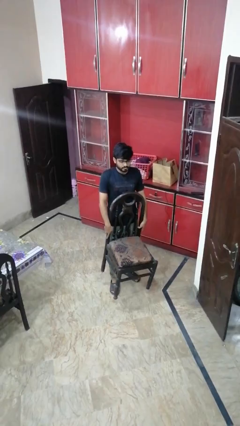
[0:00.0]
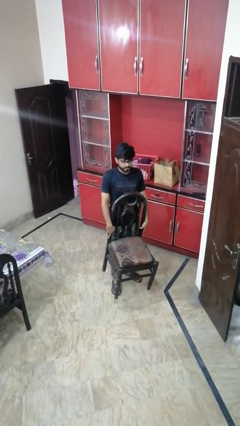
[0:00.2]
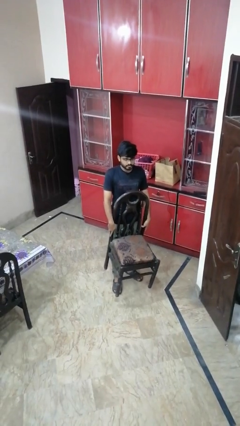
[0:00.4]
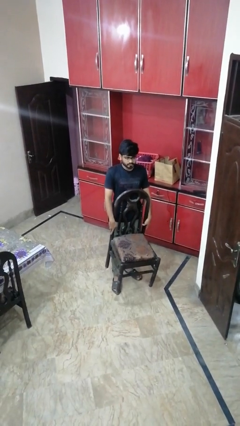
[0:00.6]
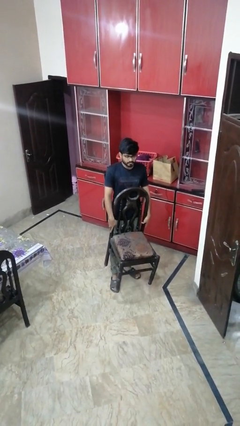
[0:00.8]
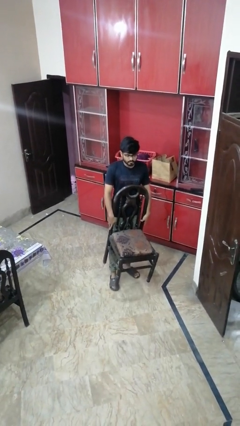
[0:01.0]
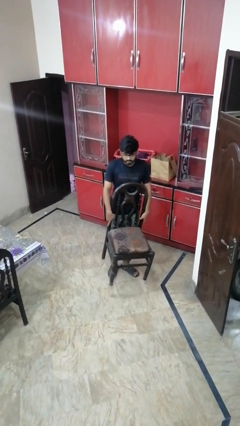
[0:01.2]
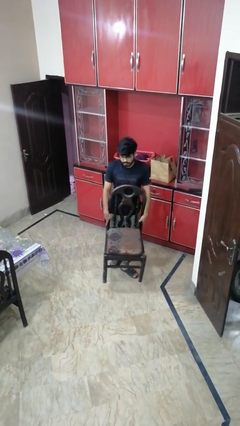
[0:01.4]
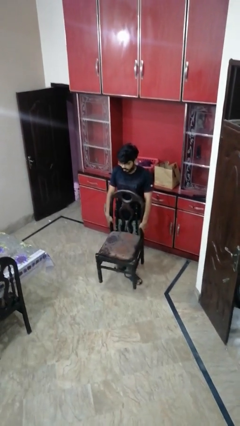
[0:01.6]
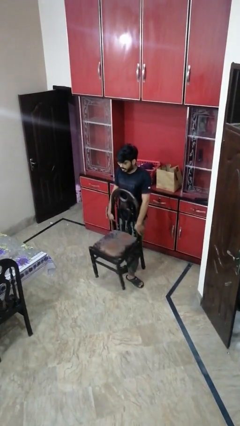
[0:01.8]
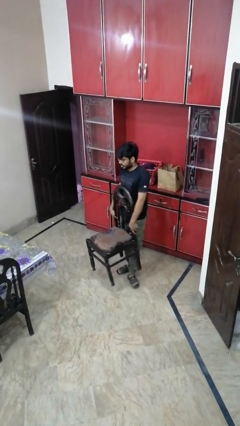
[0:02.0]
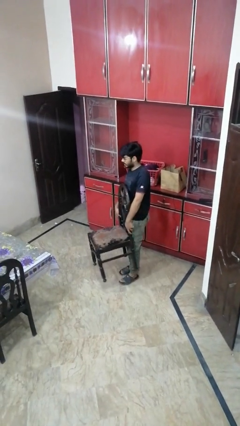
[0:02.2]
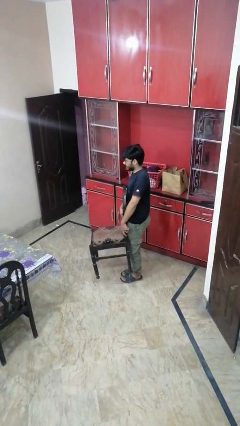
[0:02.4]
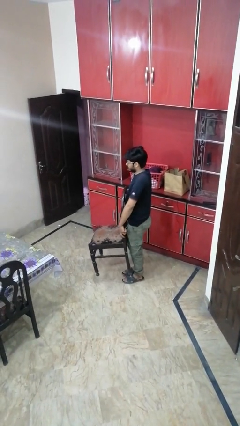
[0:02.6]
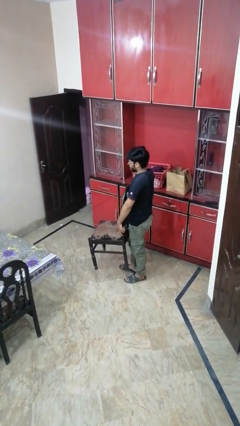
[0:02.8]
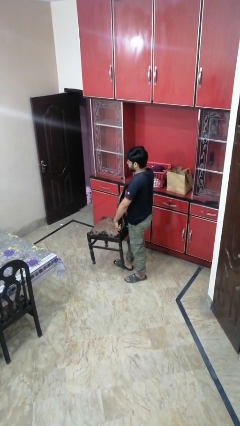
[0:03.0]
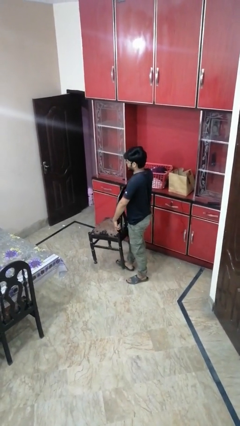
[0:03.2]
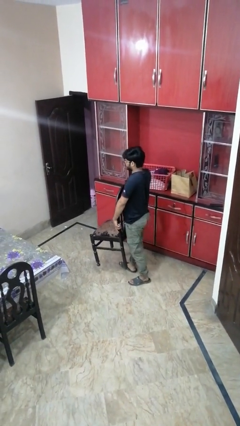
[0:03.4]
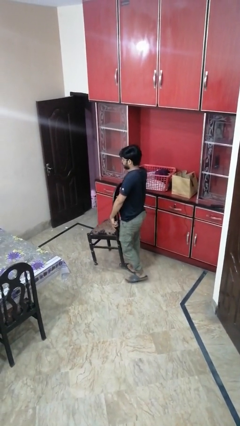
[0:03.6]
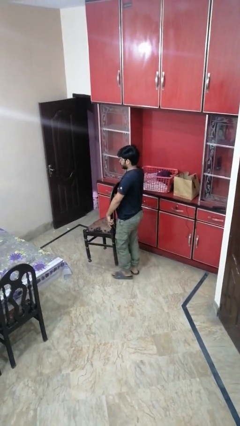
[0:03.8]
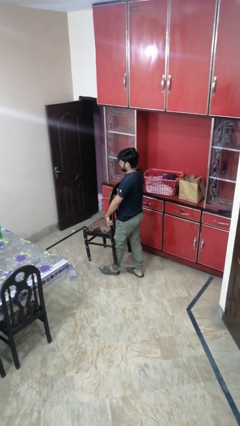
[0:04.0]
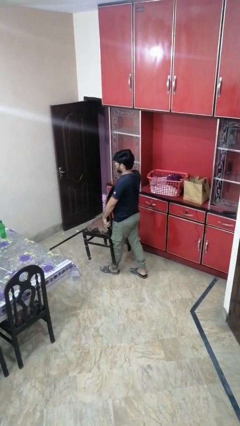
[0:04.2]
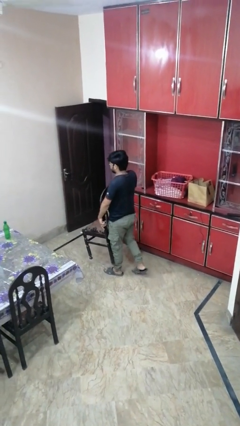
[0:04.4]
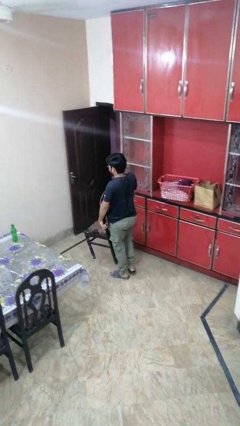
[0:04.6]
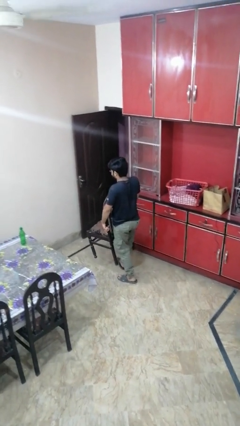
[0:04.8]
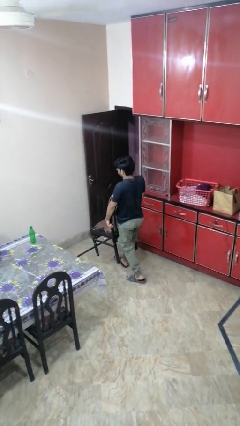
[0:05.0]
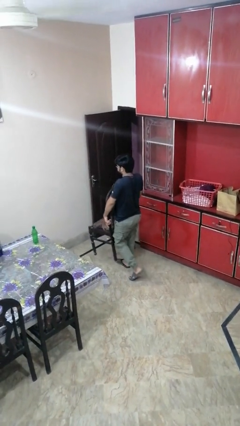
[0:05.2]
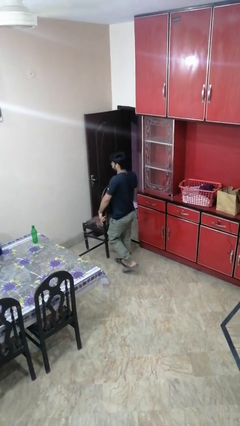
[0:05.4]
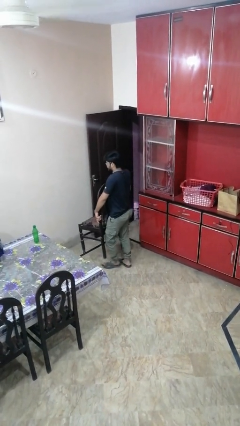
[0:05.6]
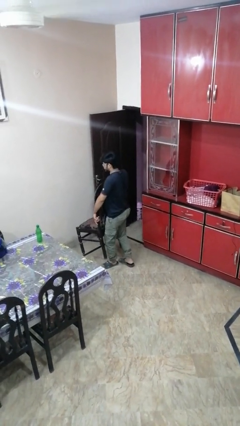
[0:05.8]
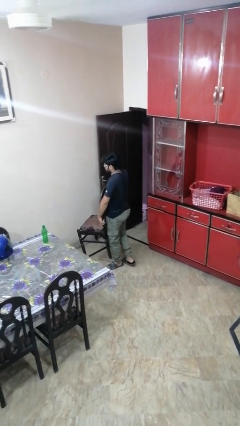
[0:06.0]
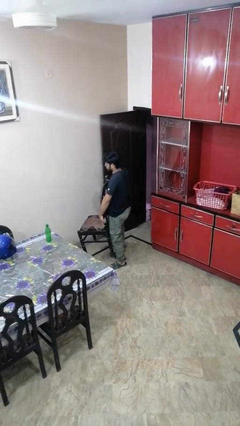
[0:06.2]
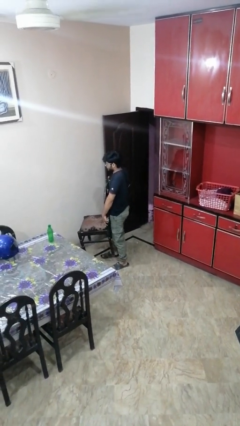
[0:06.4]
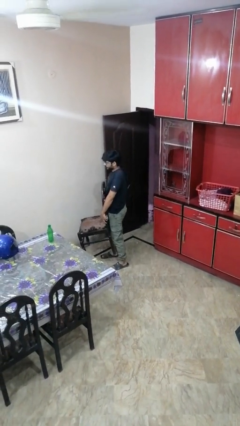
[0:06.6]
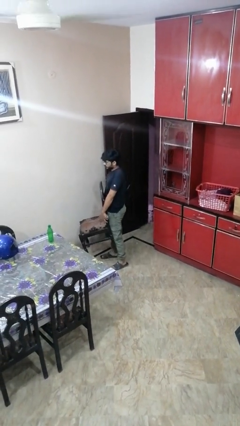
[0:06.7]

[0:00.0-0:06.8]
person carries furniture

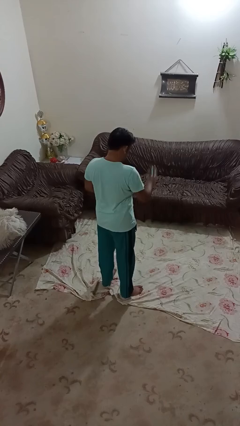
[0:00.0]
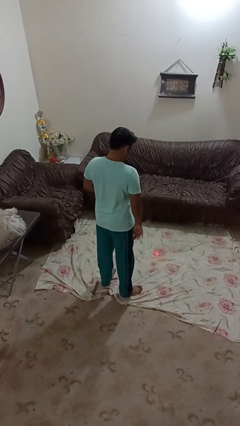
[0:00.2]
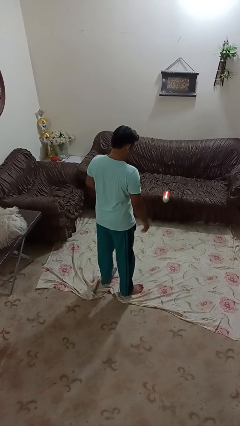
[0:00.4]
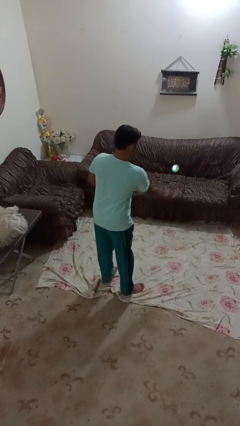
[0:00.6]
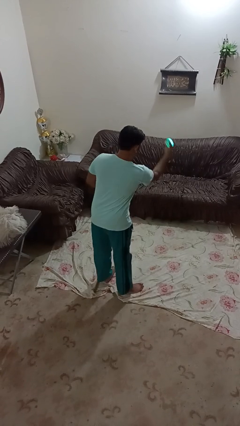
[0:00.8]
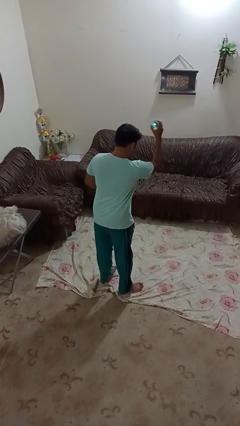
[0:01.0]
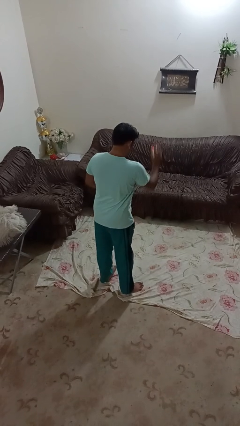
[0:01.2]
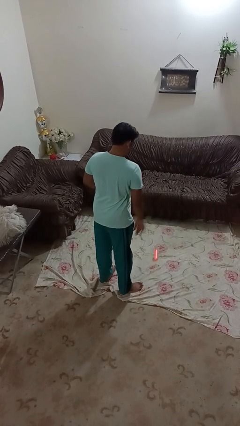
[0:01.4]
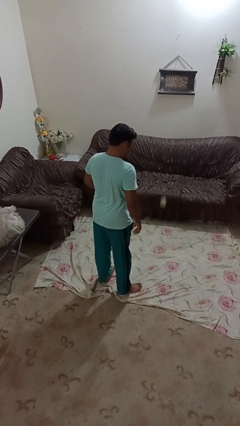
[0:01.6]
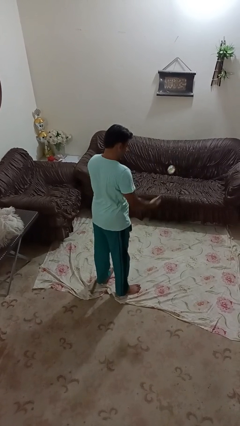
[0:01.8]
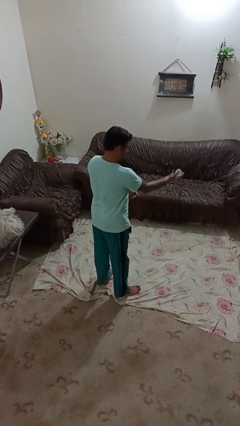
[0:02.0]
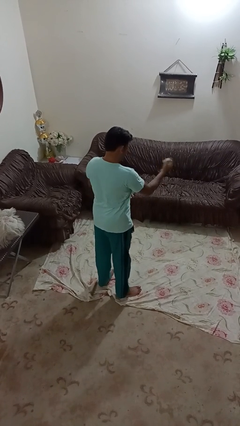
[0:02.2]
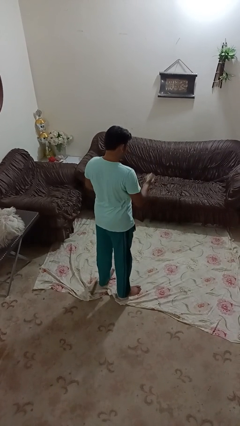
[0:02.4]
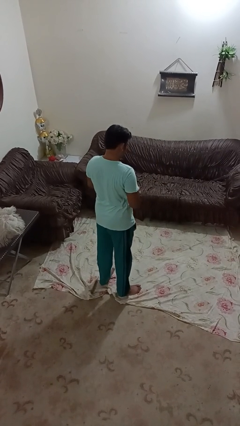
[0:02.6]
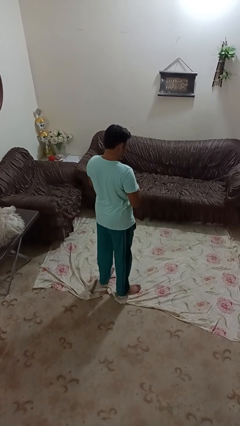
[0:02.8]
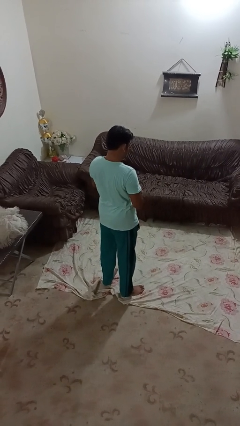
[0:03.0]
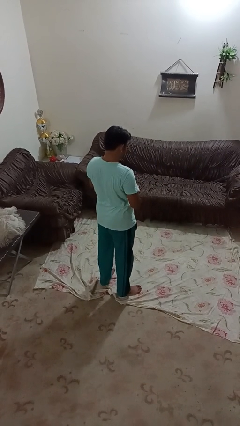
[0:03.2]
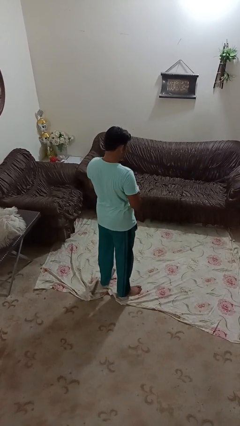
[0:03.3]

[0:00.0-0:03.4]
person bounces ball on floor

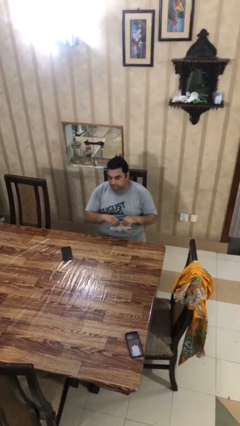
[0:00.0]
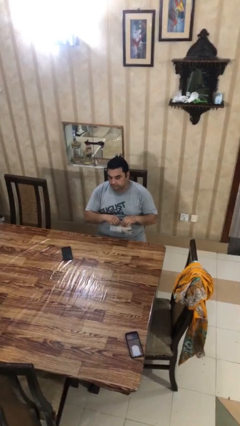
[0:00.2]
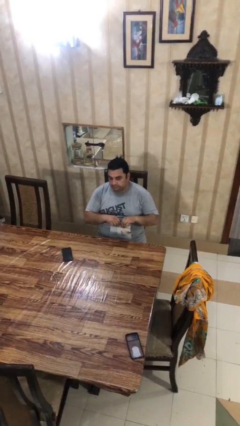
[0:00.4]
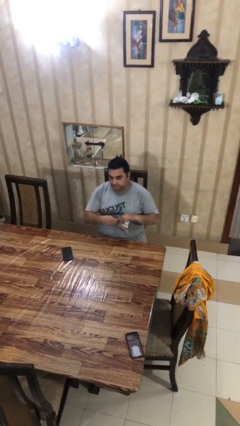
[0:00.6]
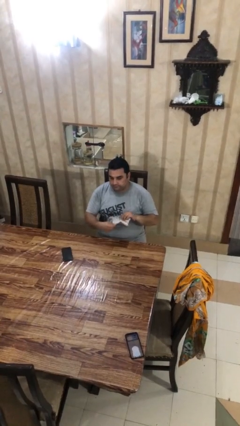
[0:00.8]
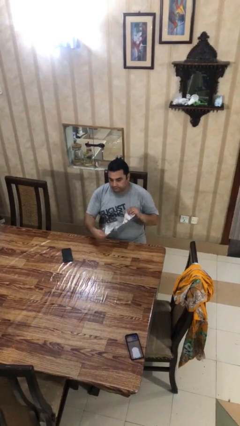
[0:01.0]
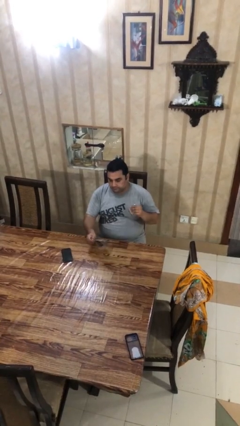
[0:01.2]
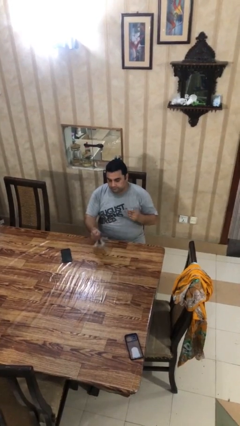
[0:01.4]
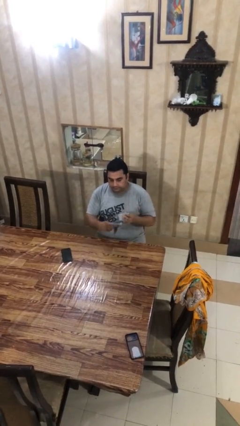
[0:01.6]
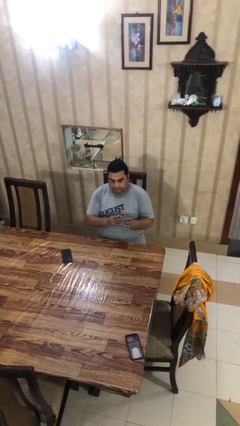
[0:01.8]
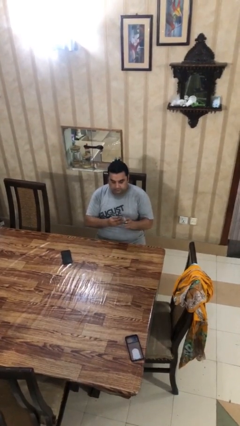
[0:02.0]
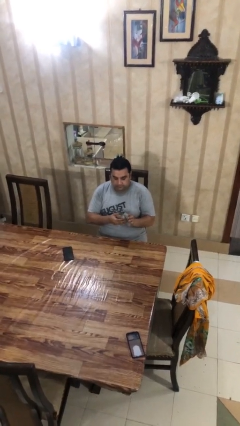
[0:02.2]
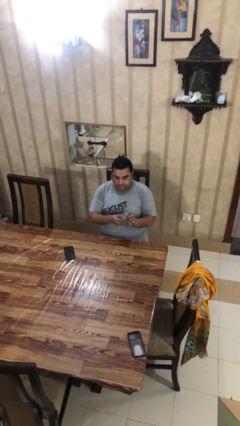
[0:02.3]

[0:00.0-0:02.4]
person tears paper

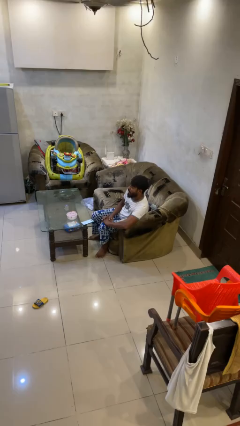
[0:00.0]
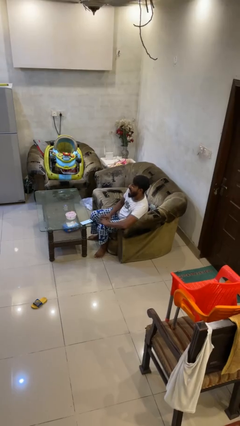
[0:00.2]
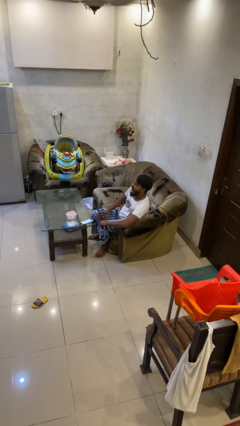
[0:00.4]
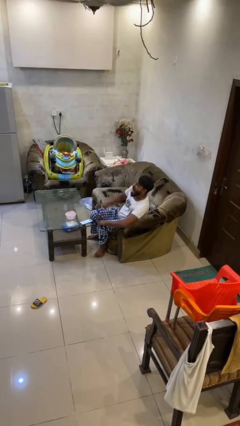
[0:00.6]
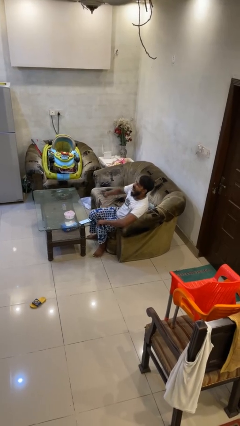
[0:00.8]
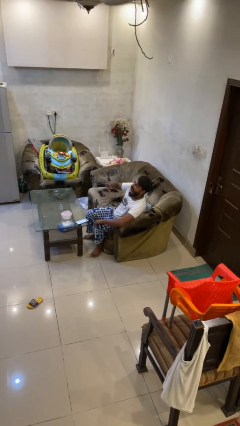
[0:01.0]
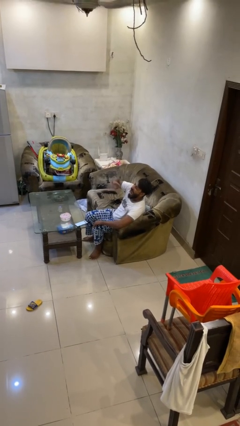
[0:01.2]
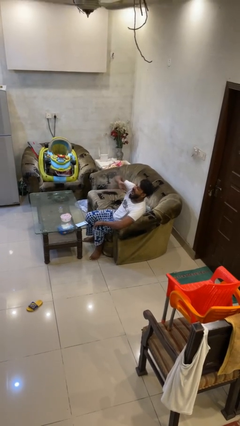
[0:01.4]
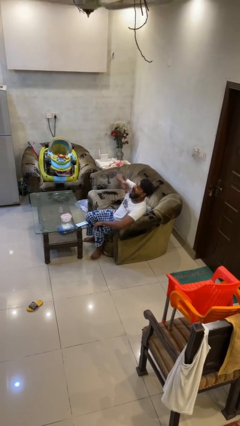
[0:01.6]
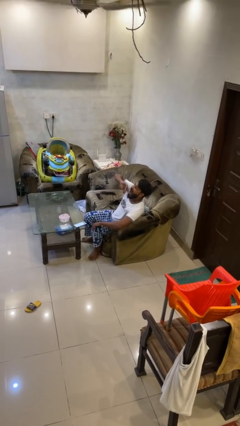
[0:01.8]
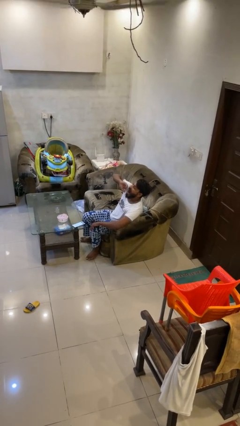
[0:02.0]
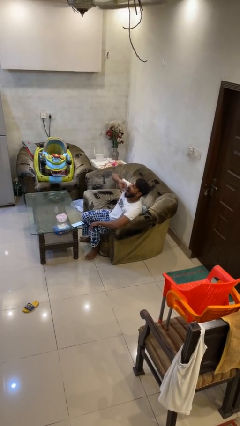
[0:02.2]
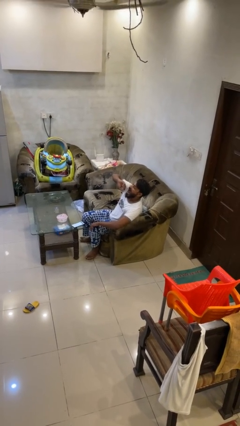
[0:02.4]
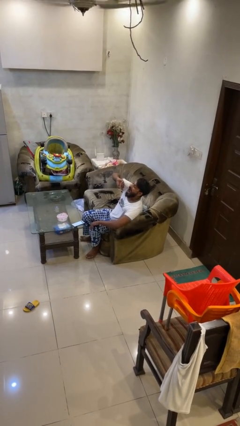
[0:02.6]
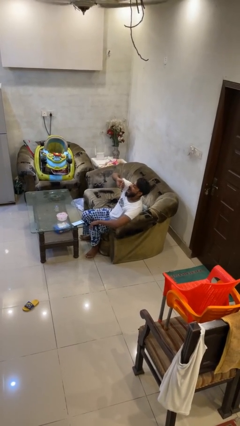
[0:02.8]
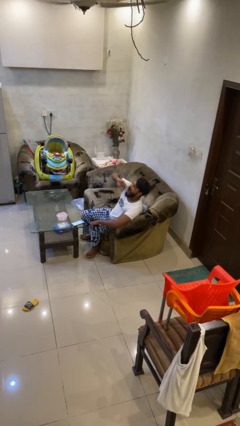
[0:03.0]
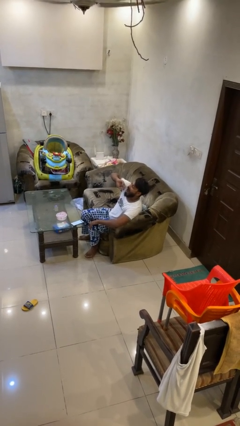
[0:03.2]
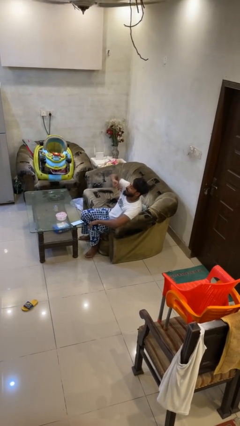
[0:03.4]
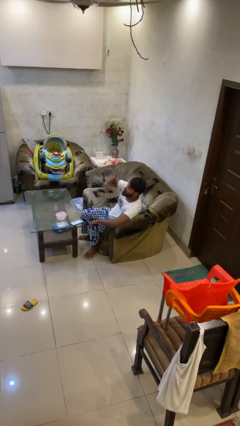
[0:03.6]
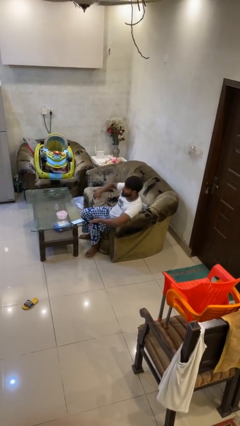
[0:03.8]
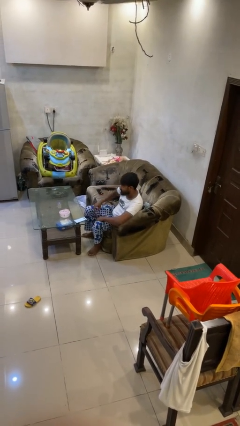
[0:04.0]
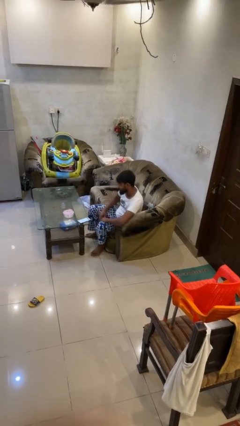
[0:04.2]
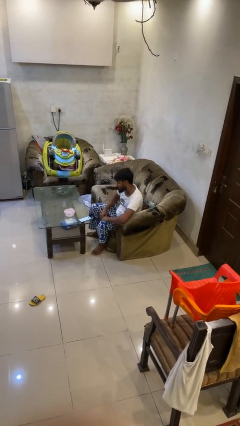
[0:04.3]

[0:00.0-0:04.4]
person yawns

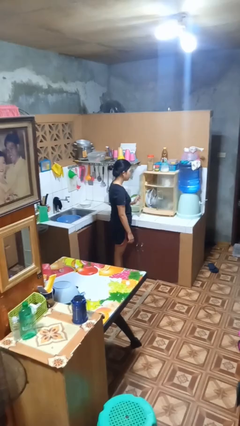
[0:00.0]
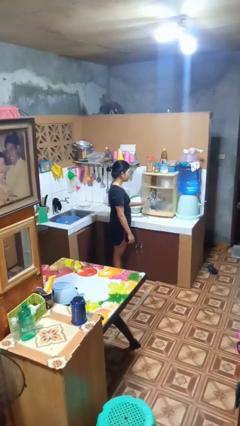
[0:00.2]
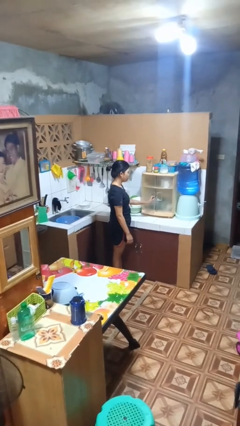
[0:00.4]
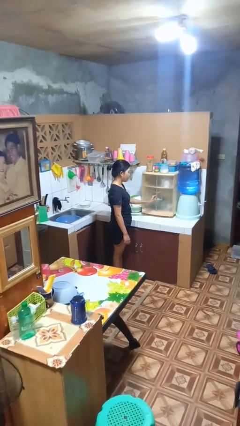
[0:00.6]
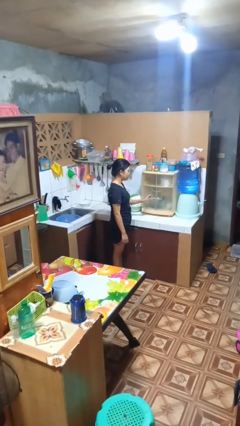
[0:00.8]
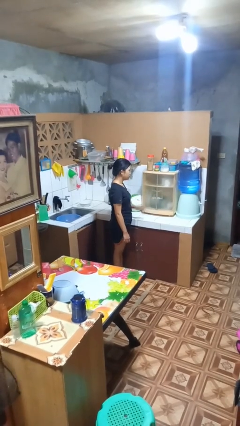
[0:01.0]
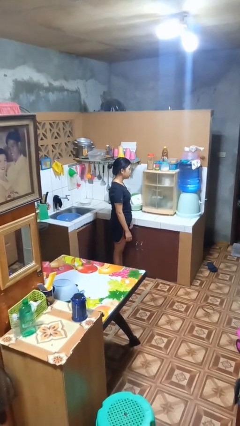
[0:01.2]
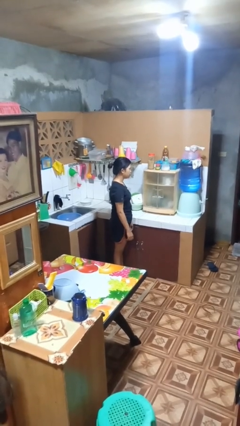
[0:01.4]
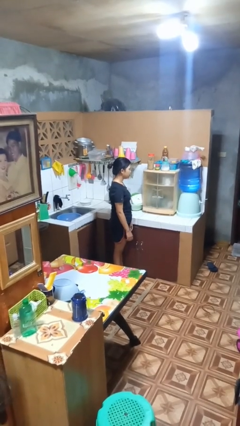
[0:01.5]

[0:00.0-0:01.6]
person closes kitchen drawer
